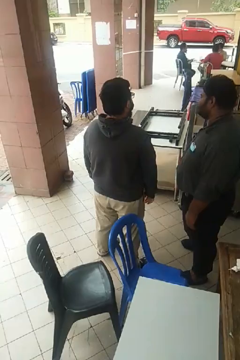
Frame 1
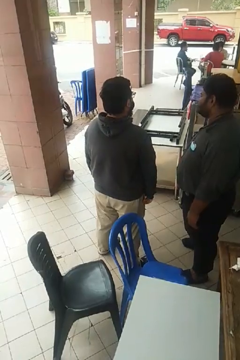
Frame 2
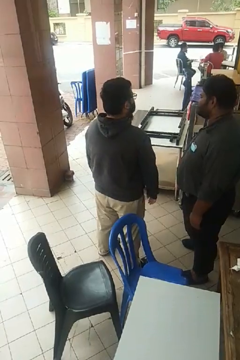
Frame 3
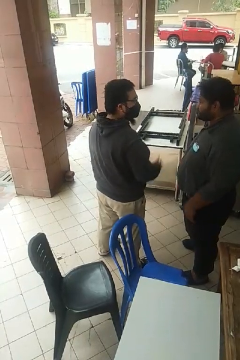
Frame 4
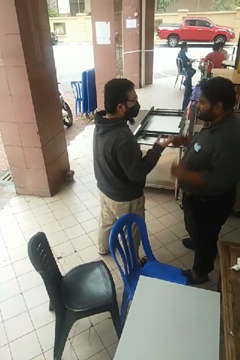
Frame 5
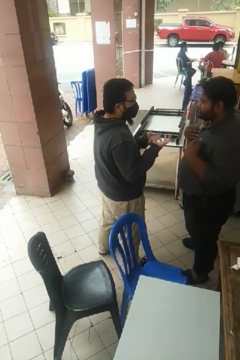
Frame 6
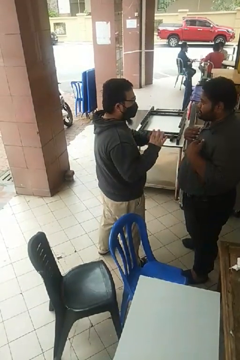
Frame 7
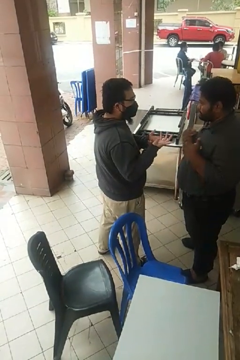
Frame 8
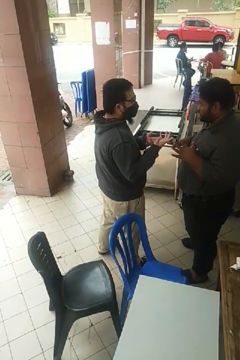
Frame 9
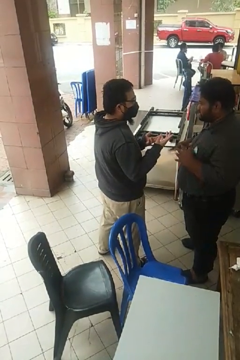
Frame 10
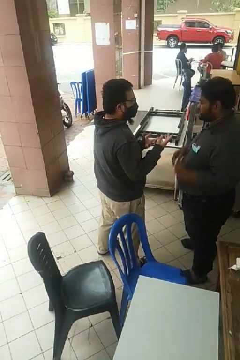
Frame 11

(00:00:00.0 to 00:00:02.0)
person talks to person

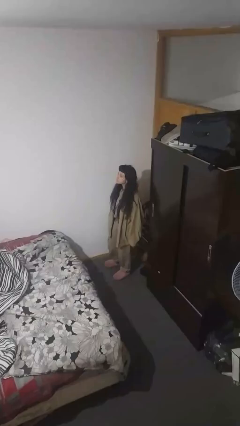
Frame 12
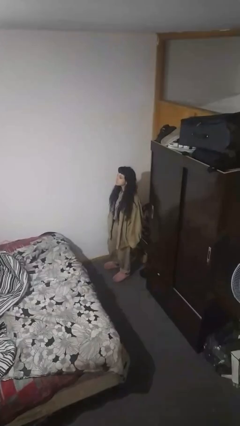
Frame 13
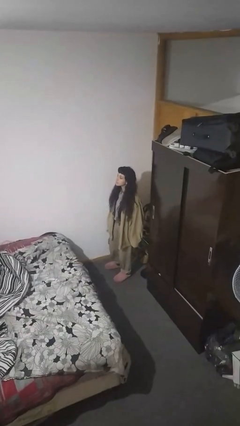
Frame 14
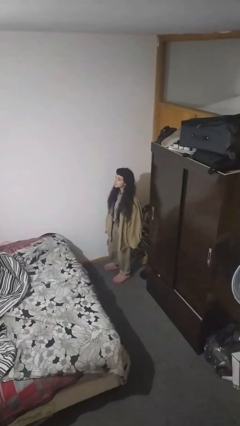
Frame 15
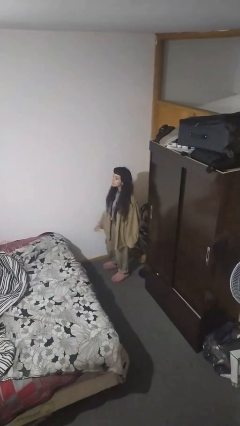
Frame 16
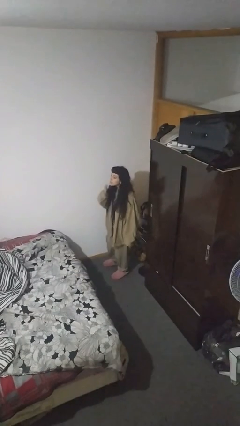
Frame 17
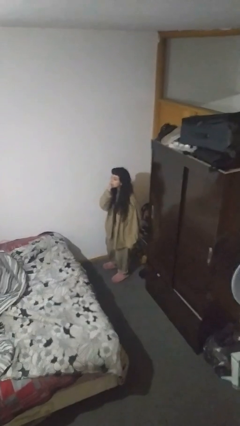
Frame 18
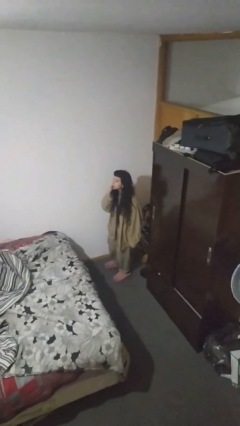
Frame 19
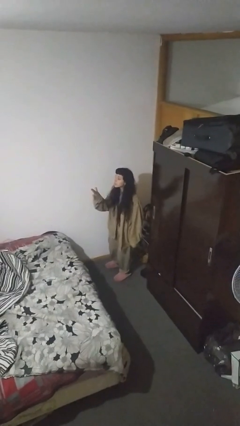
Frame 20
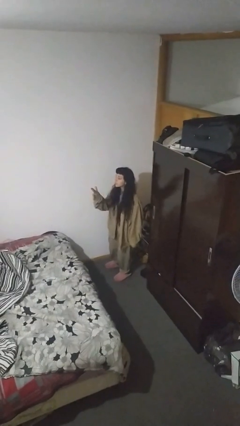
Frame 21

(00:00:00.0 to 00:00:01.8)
person gestures blow kiss

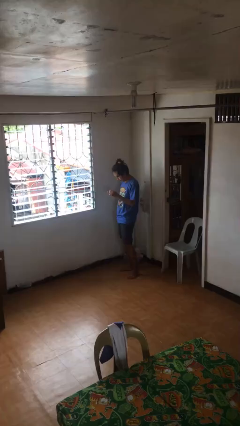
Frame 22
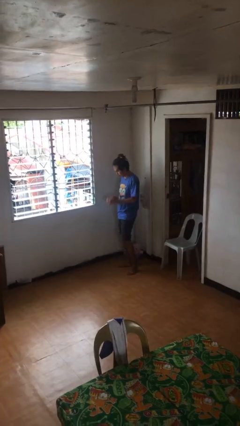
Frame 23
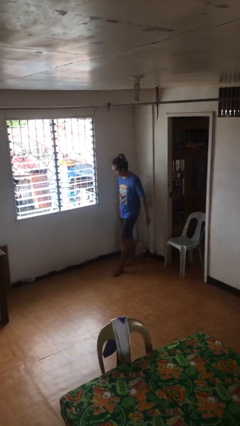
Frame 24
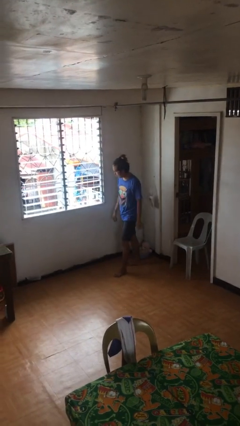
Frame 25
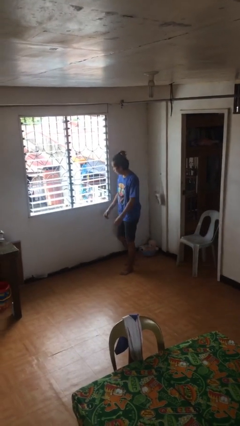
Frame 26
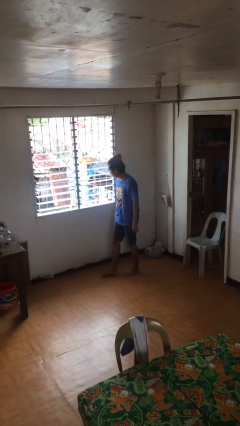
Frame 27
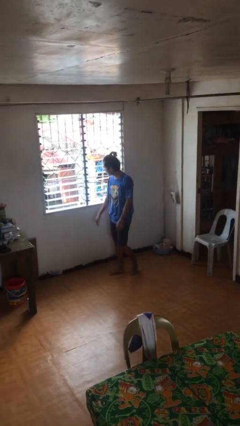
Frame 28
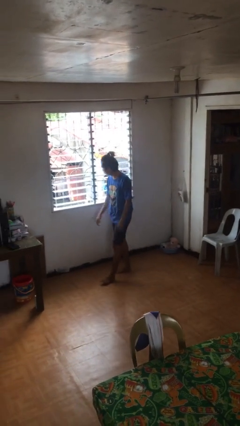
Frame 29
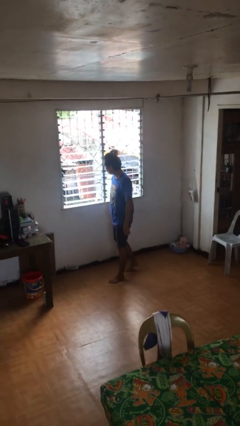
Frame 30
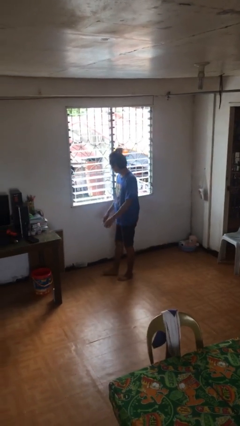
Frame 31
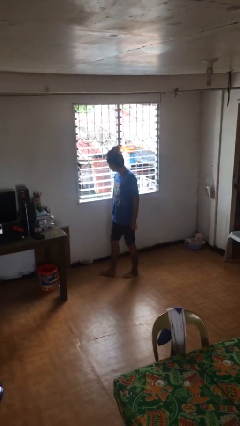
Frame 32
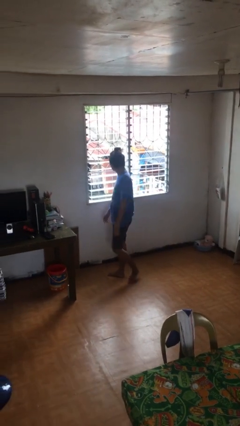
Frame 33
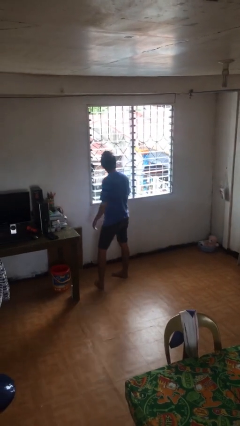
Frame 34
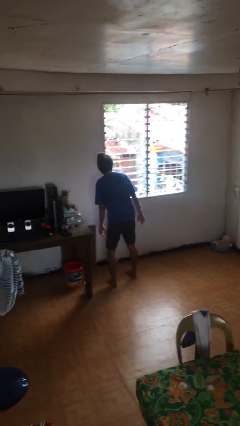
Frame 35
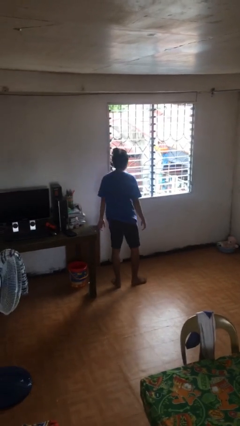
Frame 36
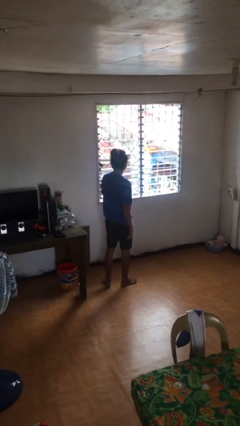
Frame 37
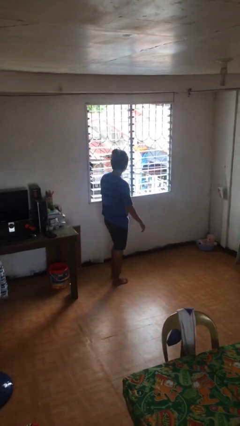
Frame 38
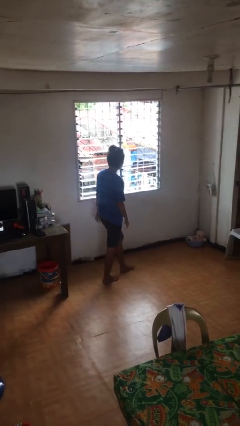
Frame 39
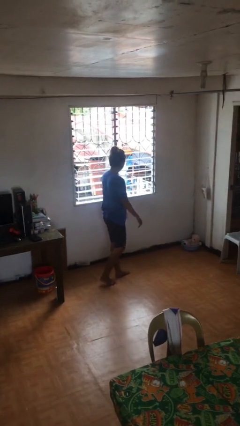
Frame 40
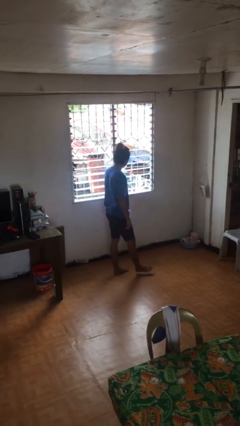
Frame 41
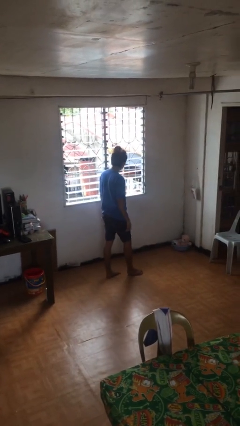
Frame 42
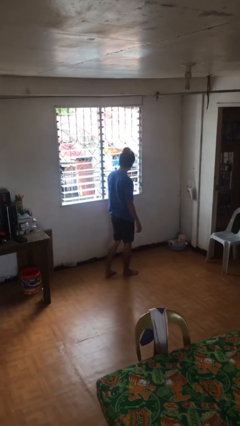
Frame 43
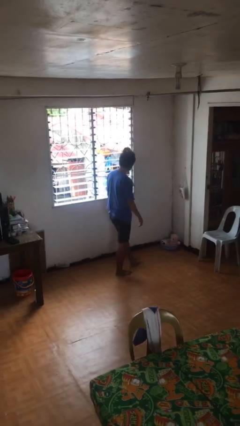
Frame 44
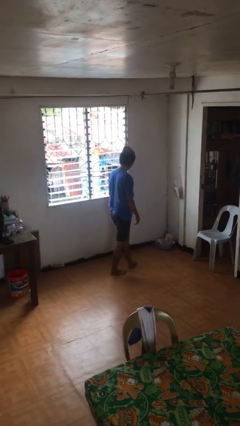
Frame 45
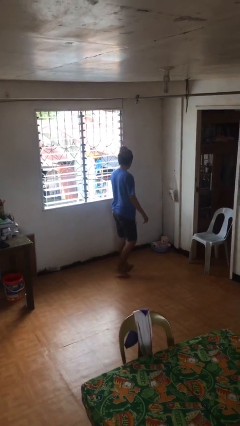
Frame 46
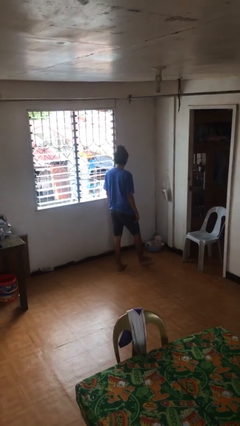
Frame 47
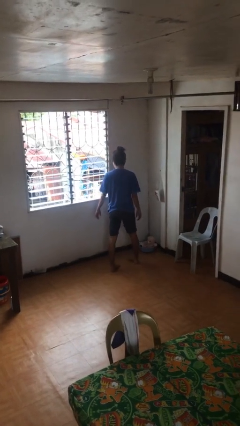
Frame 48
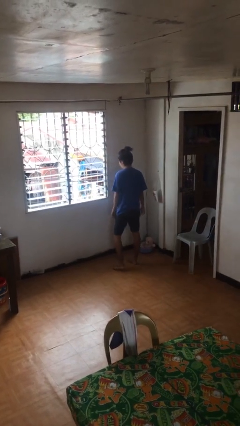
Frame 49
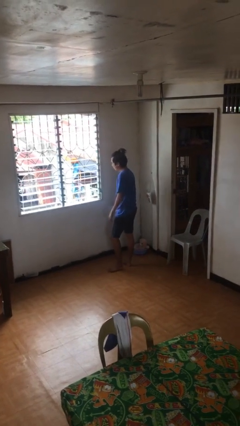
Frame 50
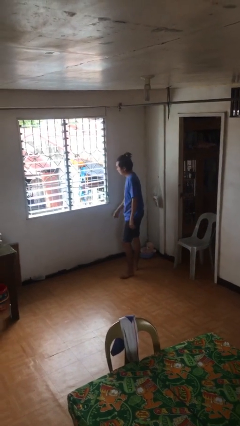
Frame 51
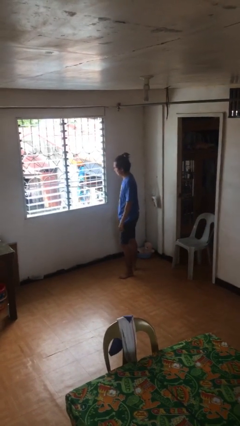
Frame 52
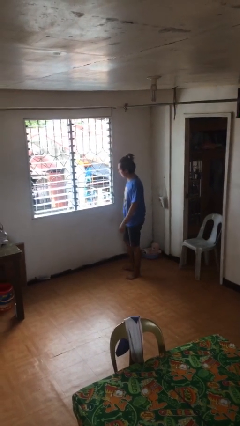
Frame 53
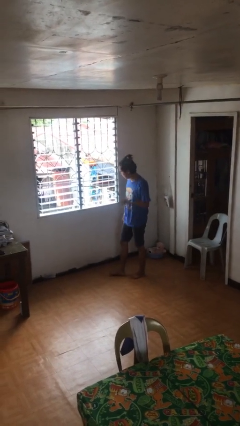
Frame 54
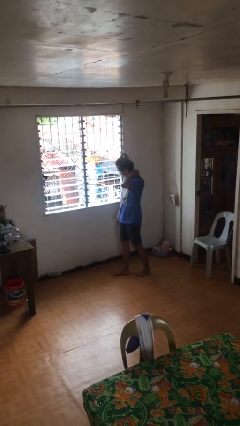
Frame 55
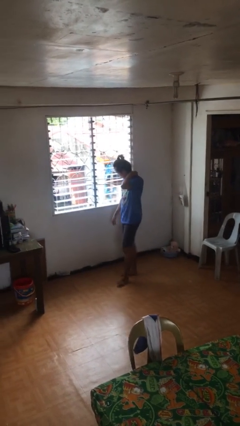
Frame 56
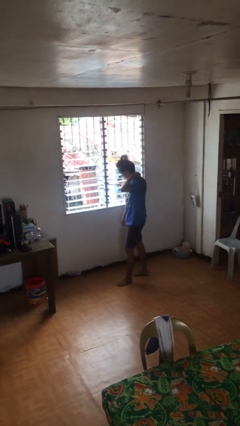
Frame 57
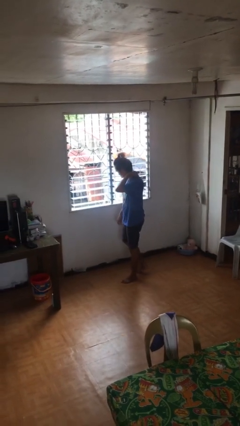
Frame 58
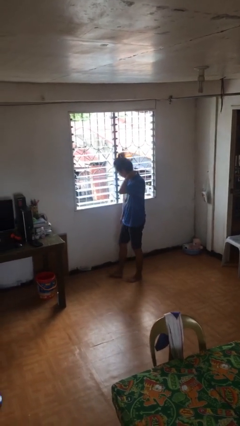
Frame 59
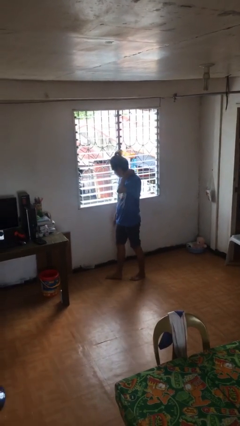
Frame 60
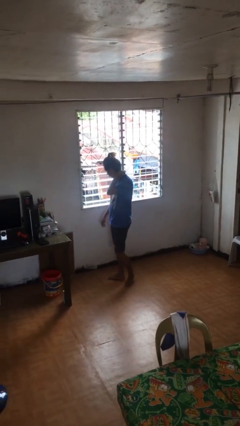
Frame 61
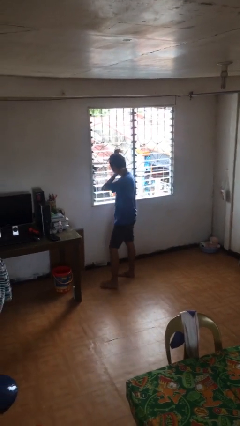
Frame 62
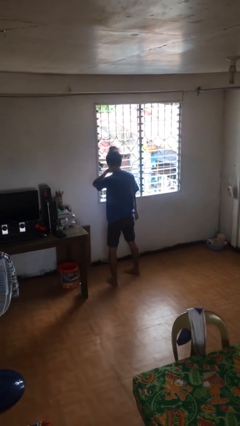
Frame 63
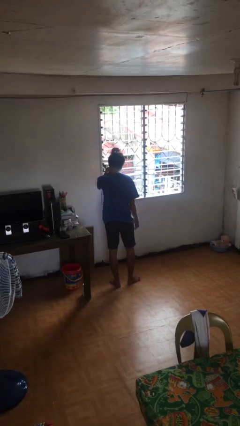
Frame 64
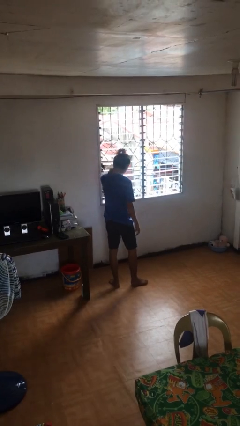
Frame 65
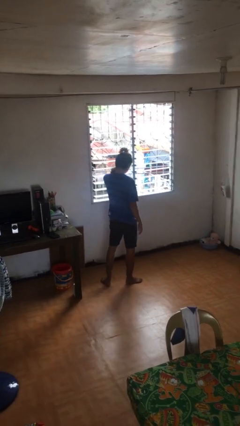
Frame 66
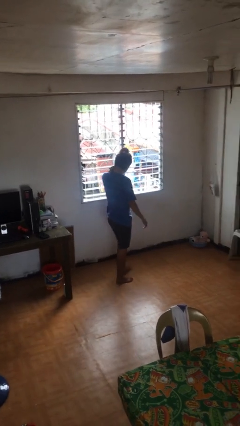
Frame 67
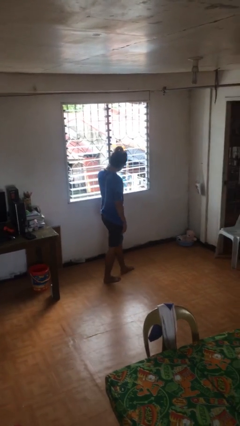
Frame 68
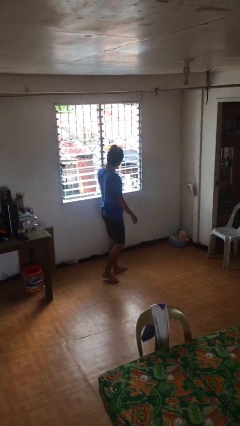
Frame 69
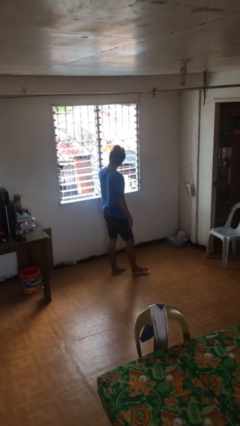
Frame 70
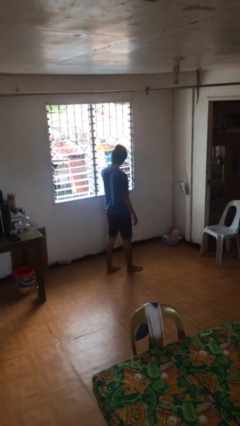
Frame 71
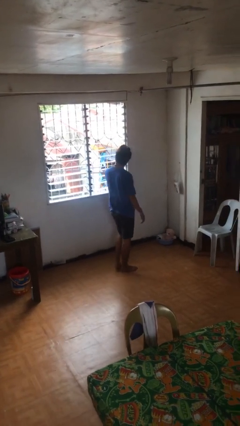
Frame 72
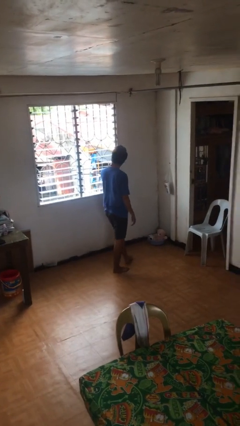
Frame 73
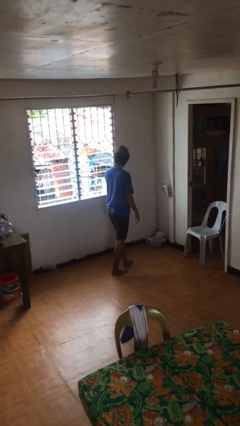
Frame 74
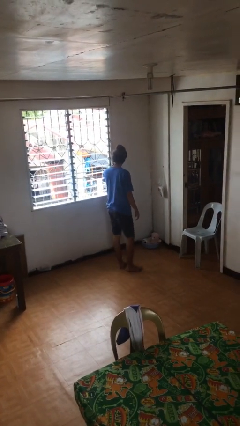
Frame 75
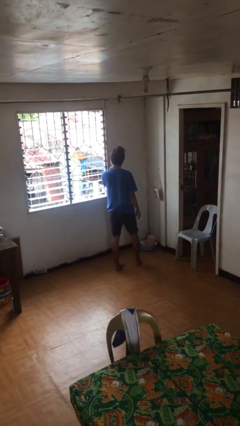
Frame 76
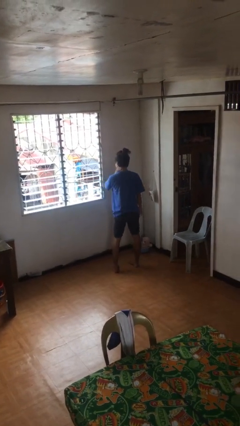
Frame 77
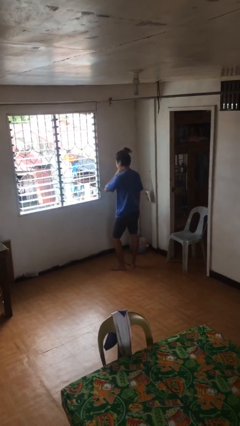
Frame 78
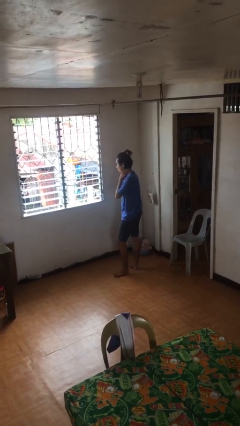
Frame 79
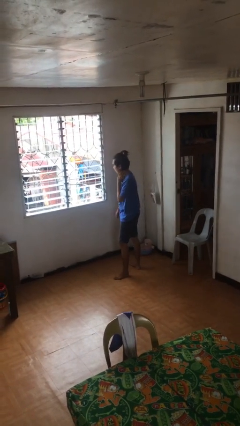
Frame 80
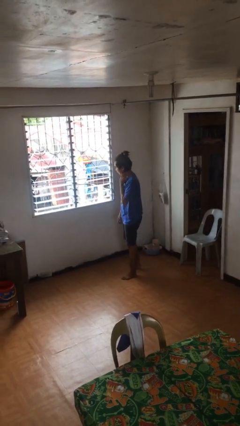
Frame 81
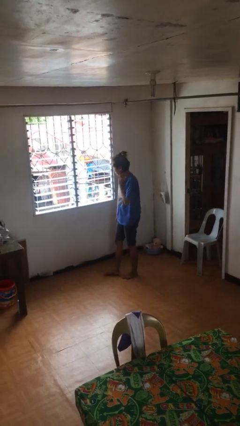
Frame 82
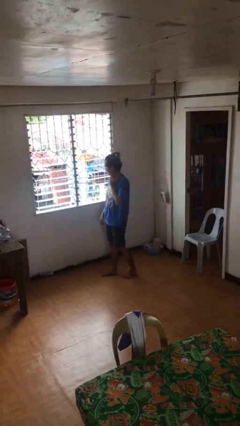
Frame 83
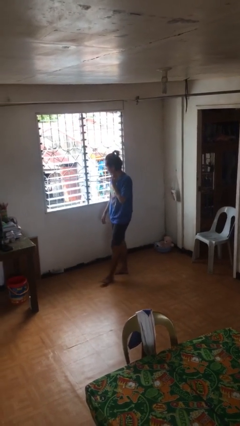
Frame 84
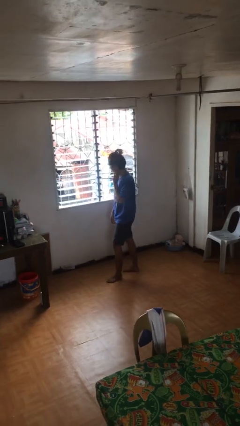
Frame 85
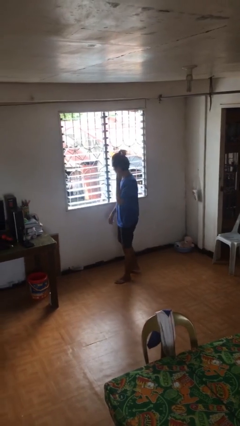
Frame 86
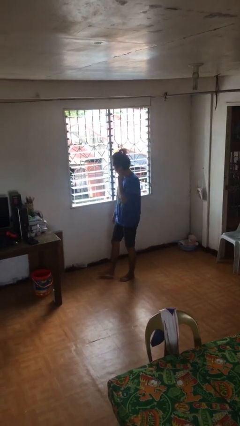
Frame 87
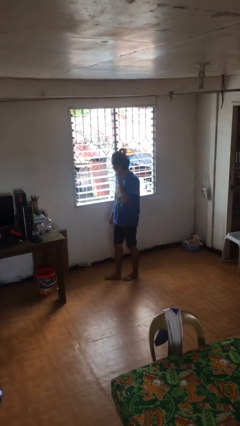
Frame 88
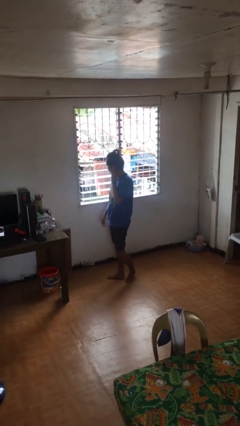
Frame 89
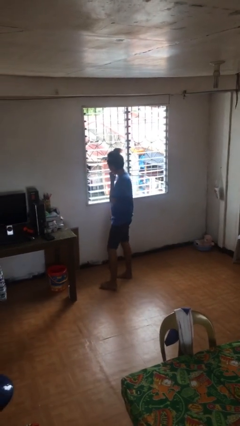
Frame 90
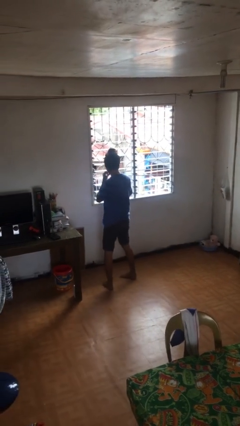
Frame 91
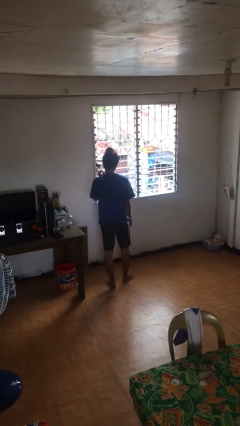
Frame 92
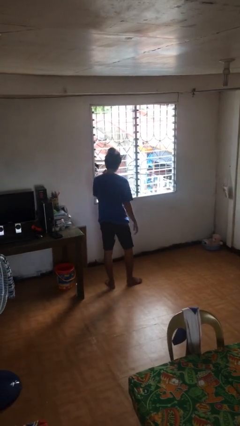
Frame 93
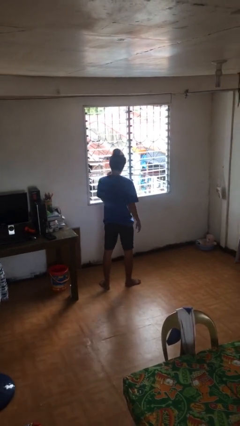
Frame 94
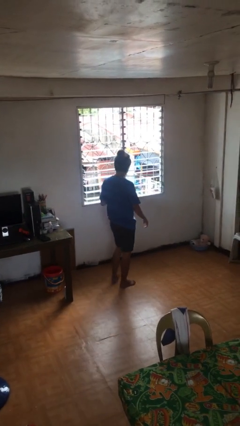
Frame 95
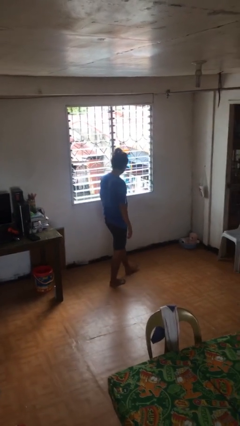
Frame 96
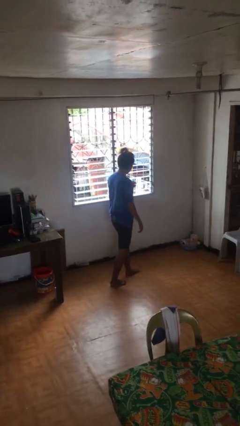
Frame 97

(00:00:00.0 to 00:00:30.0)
person walks

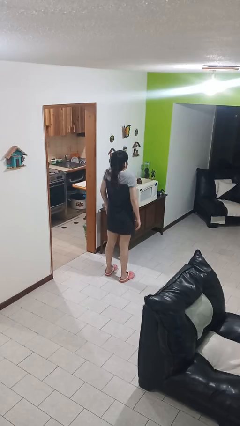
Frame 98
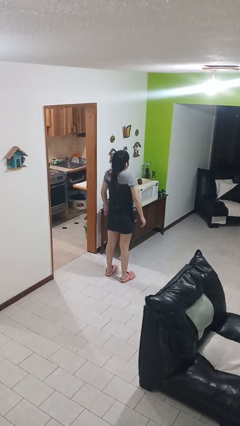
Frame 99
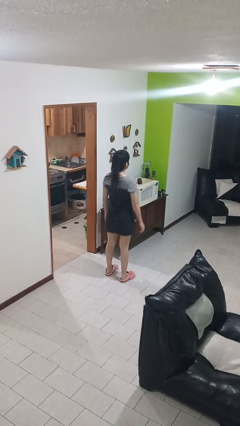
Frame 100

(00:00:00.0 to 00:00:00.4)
person shrugs
